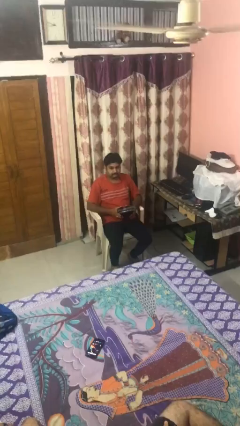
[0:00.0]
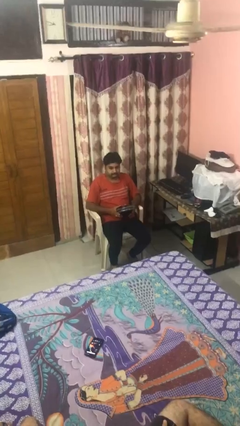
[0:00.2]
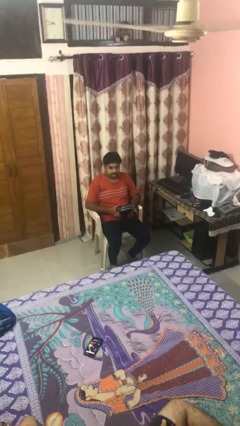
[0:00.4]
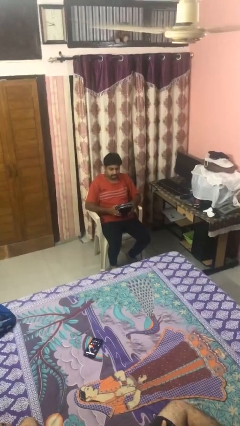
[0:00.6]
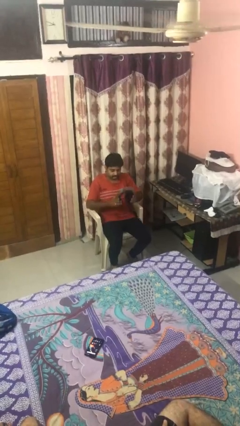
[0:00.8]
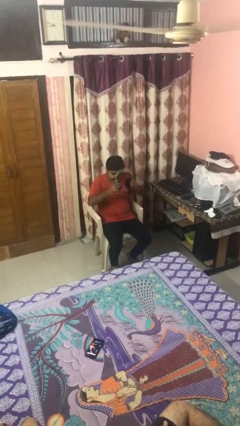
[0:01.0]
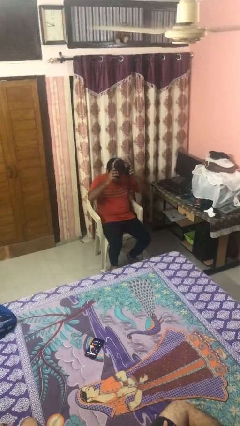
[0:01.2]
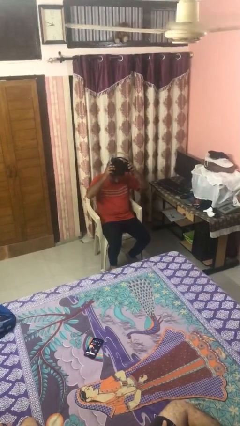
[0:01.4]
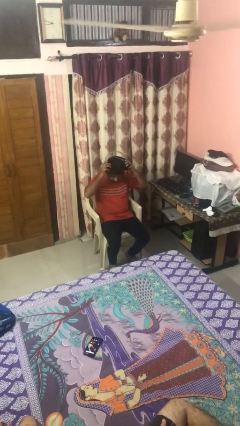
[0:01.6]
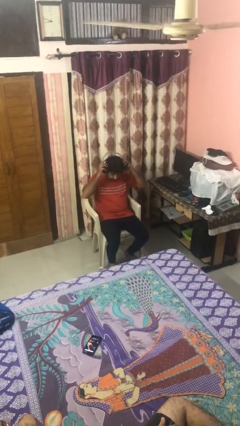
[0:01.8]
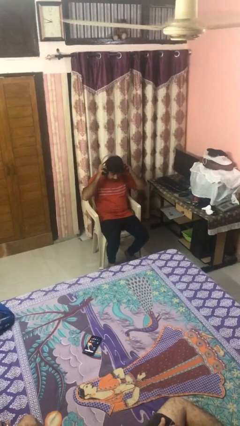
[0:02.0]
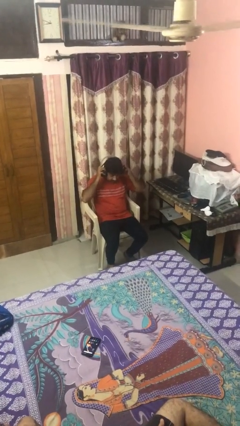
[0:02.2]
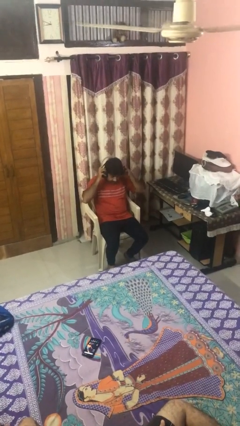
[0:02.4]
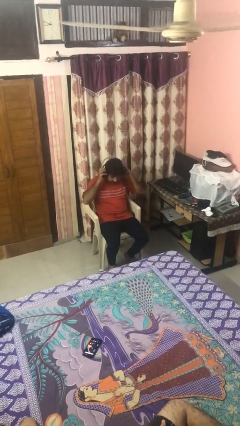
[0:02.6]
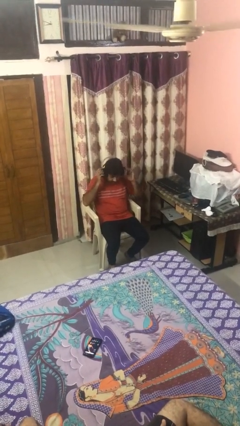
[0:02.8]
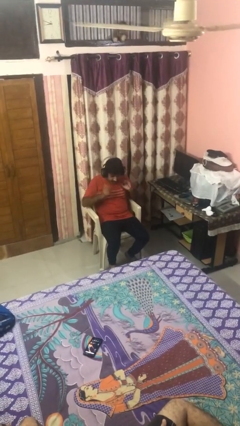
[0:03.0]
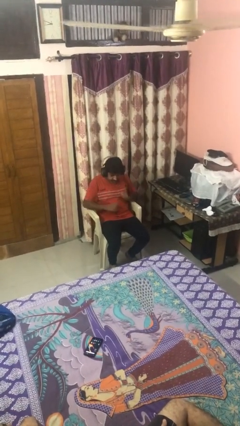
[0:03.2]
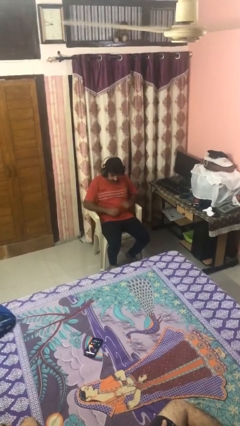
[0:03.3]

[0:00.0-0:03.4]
person puts on headphones

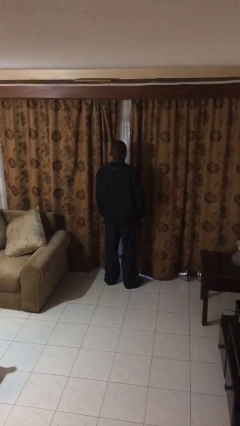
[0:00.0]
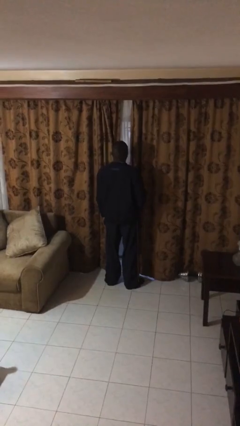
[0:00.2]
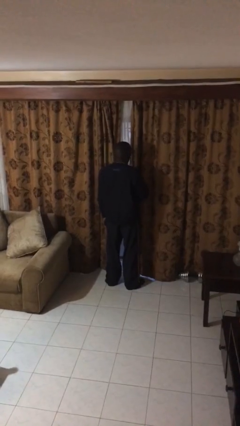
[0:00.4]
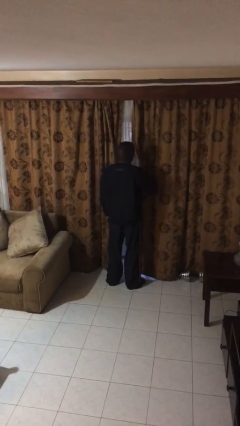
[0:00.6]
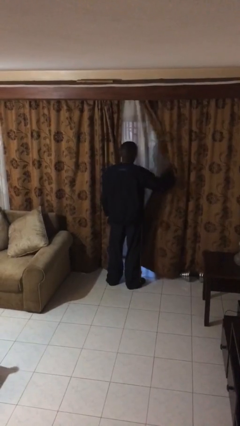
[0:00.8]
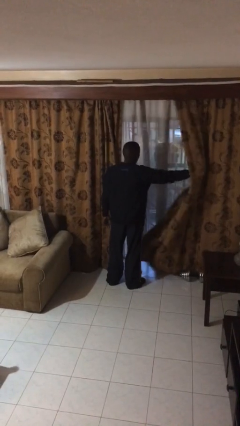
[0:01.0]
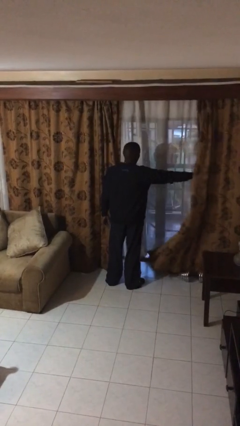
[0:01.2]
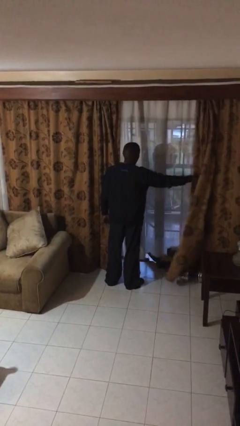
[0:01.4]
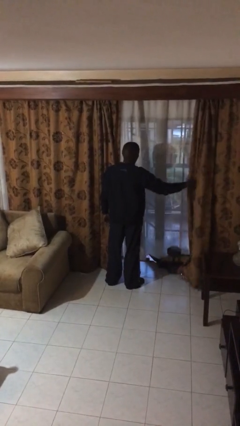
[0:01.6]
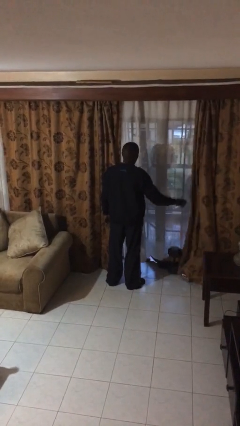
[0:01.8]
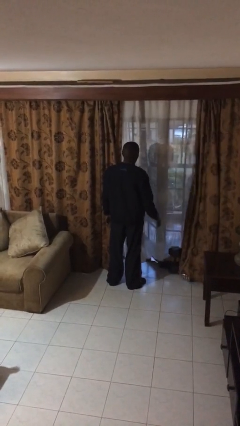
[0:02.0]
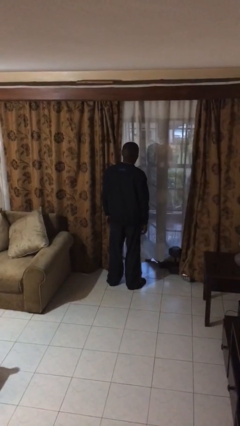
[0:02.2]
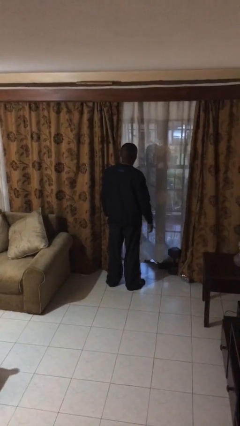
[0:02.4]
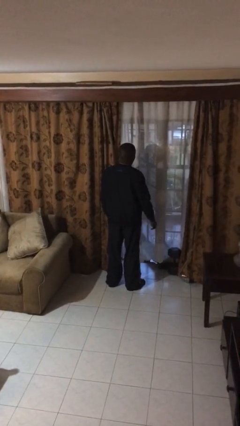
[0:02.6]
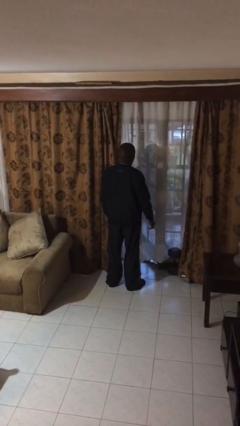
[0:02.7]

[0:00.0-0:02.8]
person opens curtains

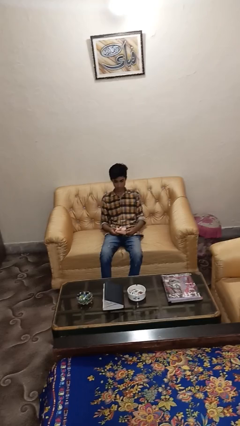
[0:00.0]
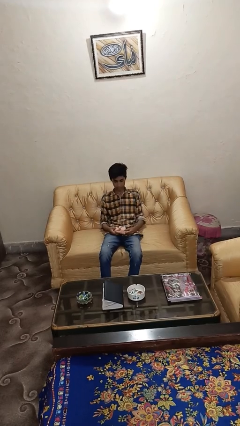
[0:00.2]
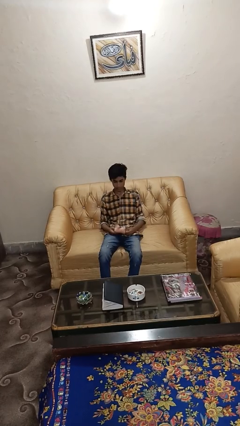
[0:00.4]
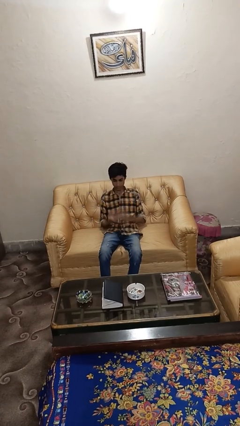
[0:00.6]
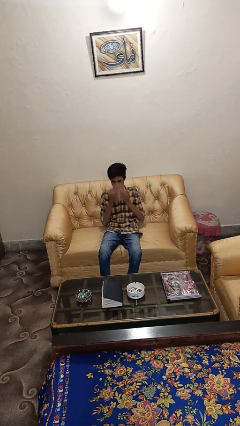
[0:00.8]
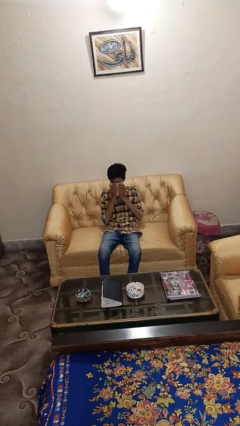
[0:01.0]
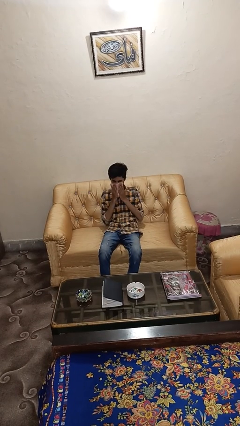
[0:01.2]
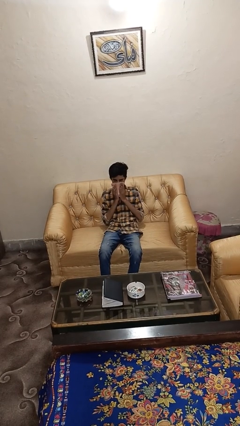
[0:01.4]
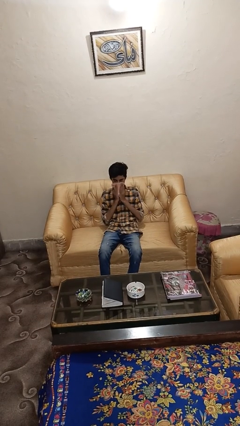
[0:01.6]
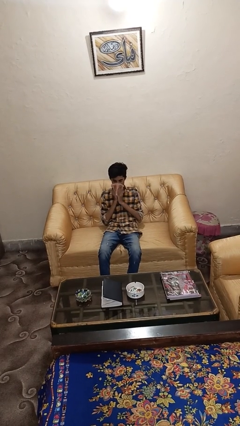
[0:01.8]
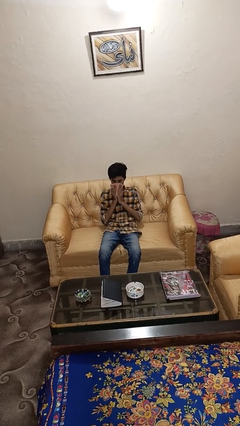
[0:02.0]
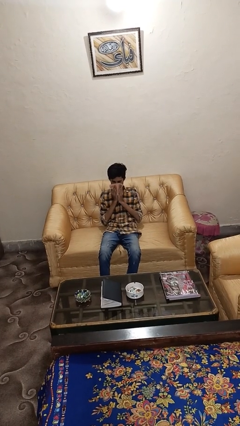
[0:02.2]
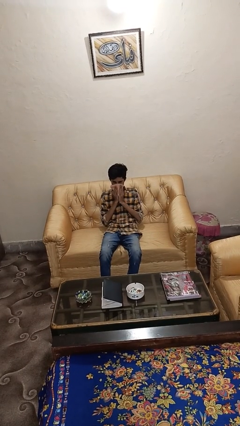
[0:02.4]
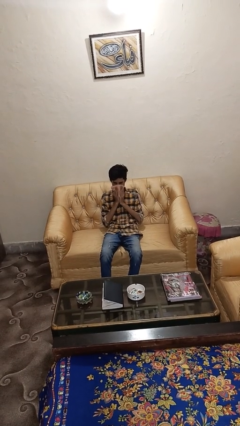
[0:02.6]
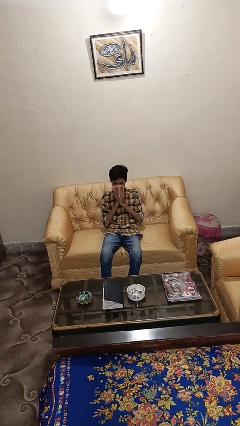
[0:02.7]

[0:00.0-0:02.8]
person blows nose

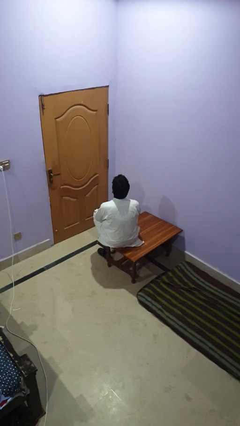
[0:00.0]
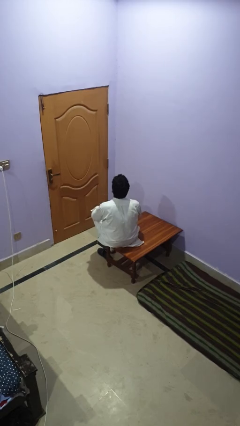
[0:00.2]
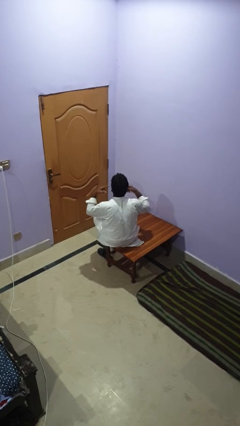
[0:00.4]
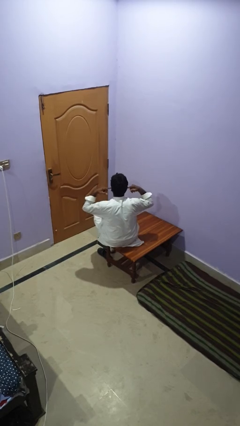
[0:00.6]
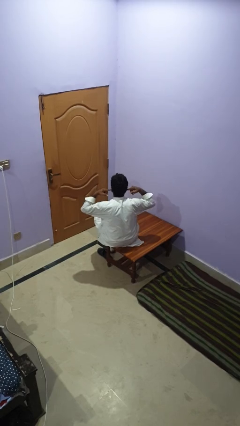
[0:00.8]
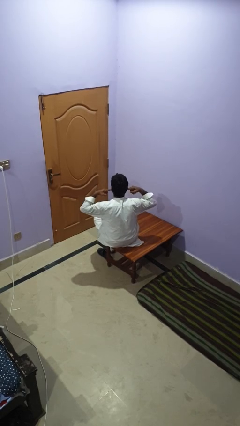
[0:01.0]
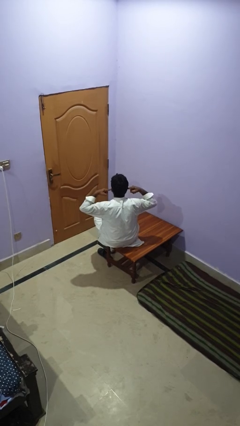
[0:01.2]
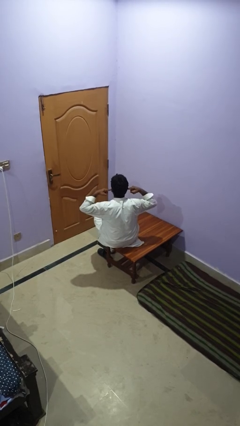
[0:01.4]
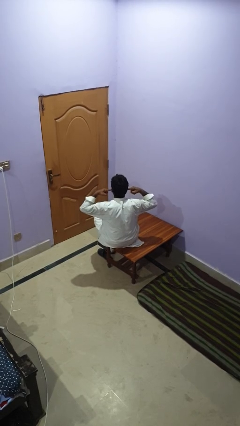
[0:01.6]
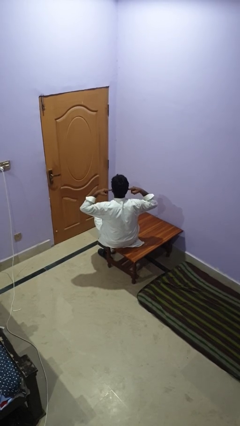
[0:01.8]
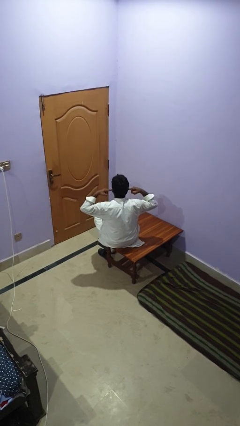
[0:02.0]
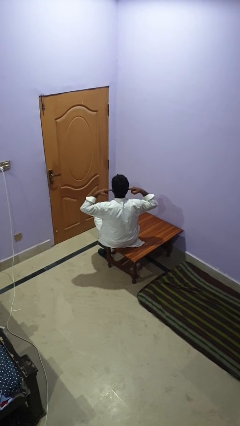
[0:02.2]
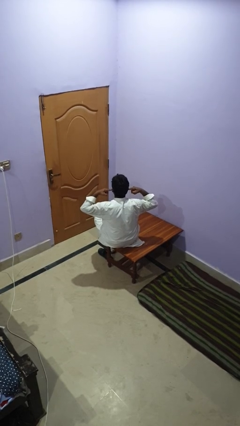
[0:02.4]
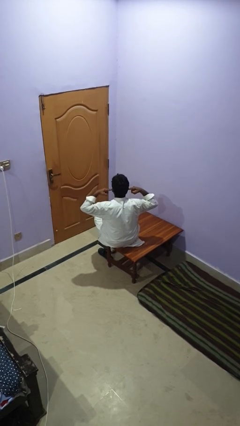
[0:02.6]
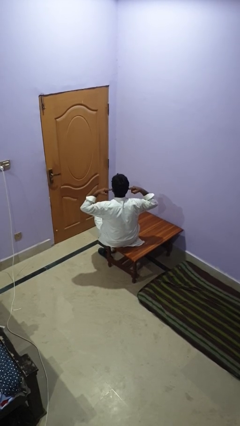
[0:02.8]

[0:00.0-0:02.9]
person puts fingers in ear

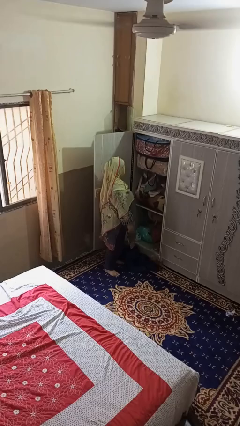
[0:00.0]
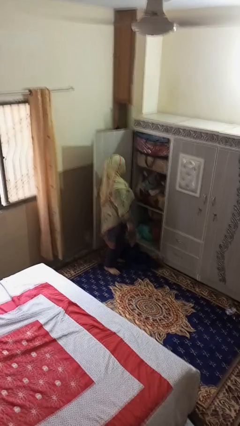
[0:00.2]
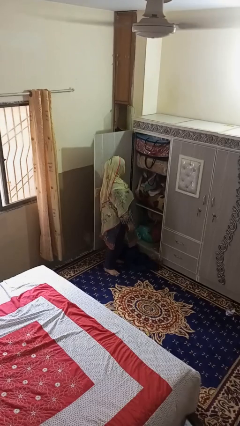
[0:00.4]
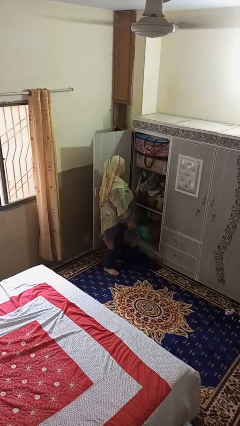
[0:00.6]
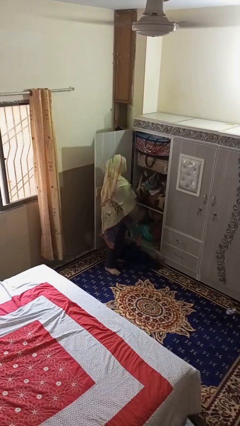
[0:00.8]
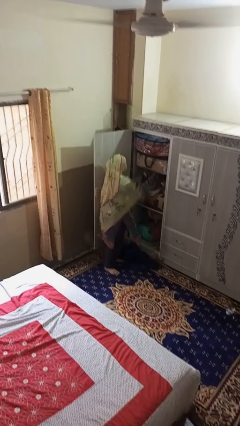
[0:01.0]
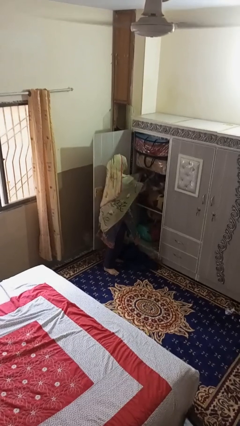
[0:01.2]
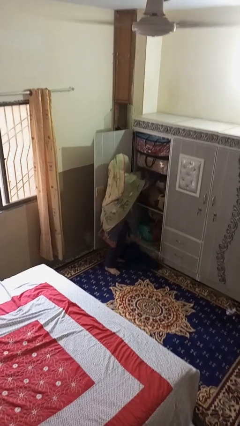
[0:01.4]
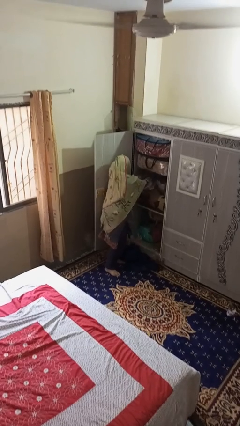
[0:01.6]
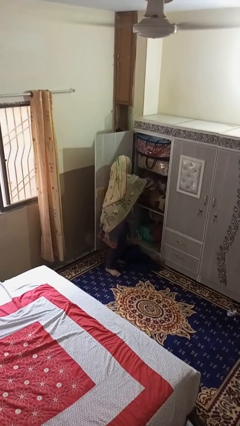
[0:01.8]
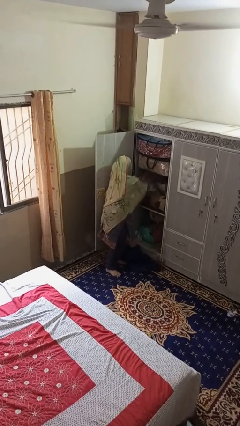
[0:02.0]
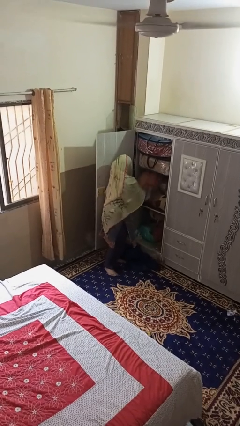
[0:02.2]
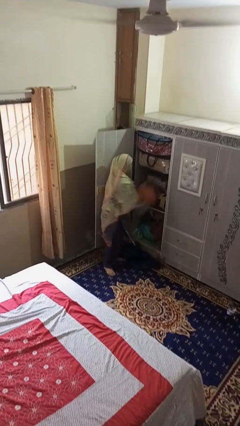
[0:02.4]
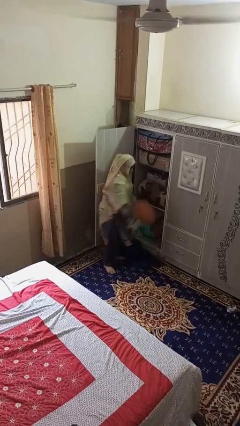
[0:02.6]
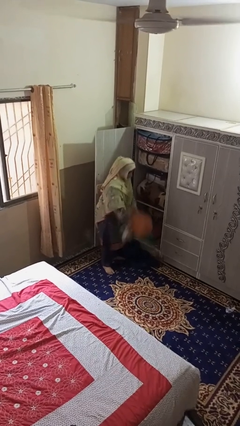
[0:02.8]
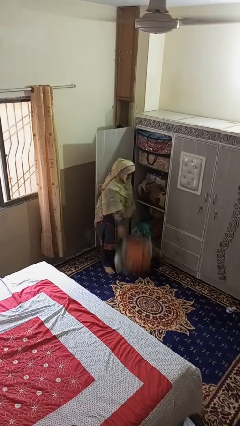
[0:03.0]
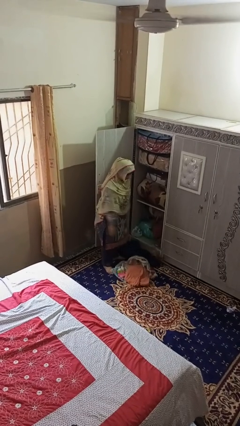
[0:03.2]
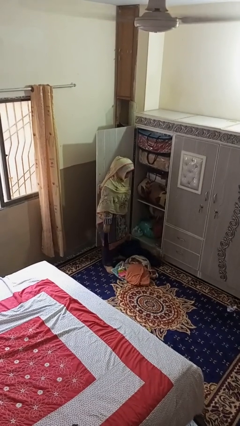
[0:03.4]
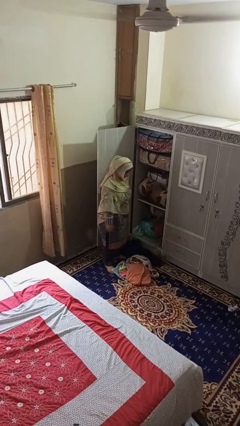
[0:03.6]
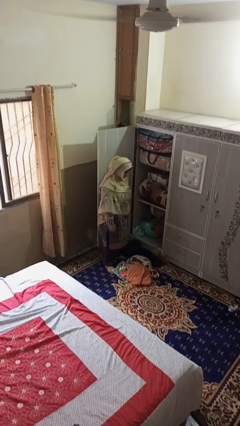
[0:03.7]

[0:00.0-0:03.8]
person puts clothes into dresser

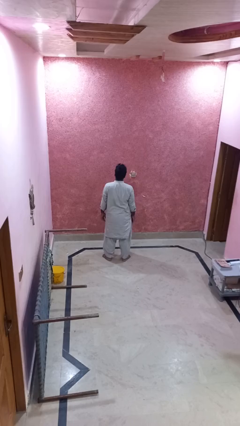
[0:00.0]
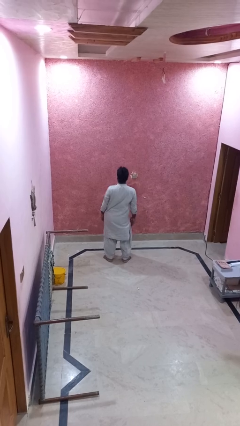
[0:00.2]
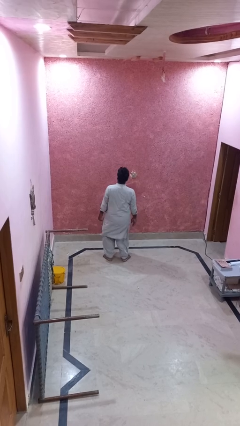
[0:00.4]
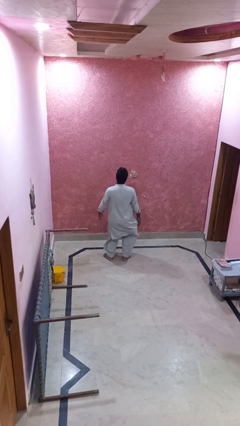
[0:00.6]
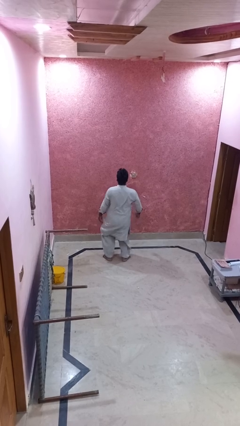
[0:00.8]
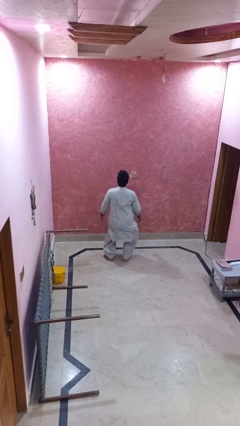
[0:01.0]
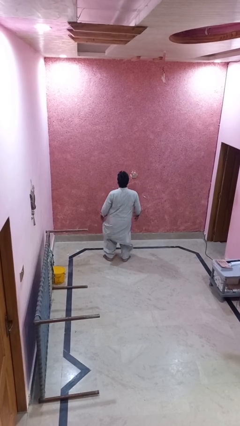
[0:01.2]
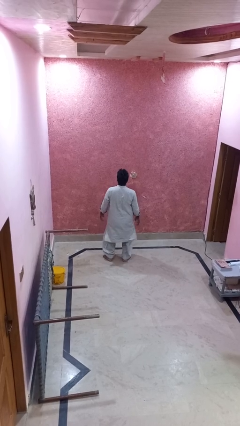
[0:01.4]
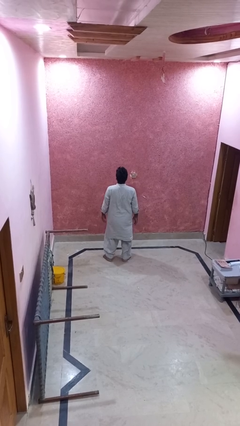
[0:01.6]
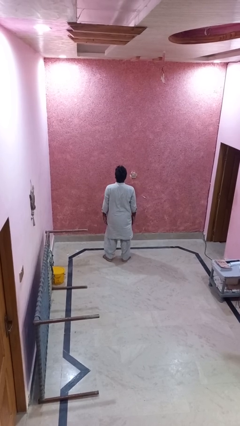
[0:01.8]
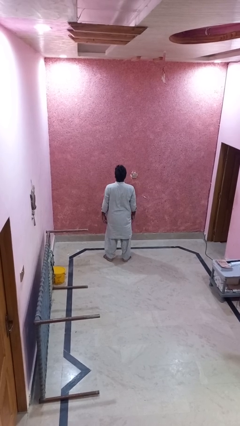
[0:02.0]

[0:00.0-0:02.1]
person wiggles hips
